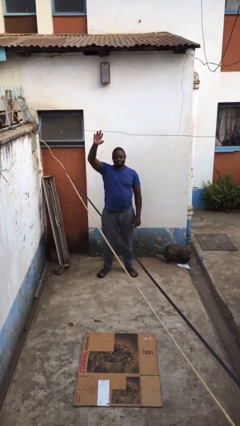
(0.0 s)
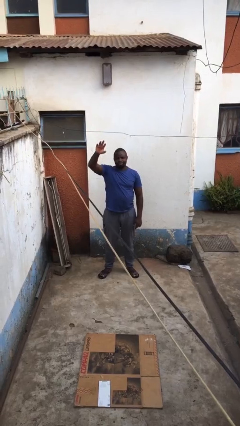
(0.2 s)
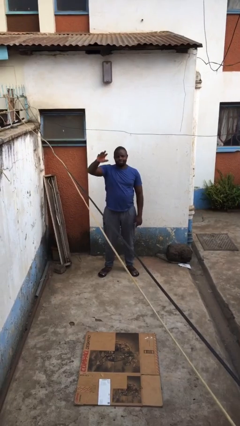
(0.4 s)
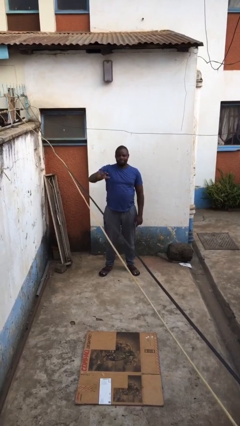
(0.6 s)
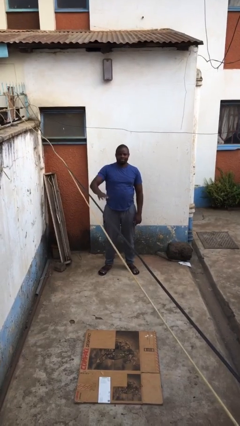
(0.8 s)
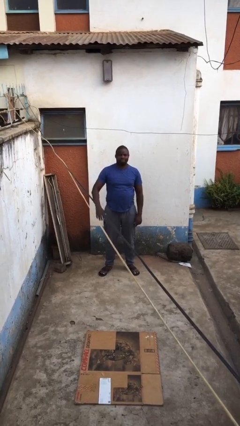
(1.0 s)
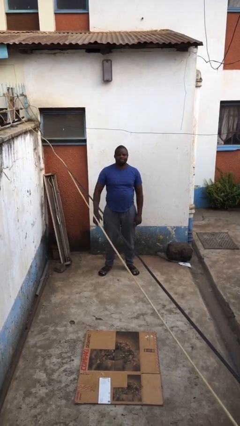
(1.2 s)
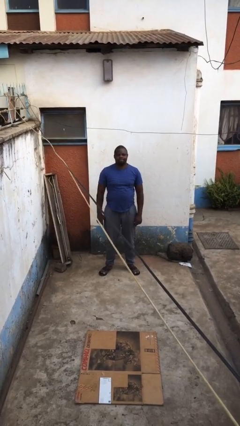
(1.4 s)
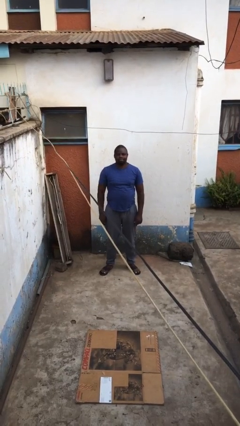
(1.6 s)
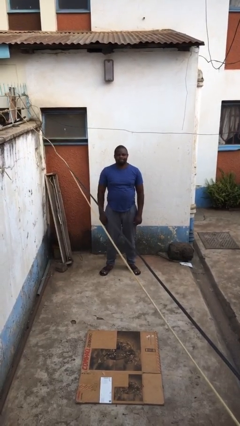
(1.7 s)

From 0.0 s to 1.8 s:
person gestures lower hand

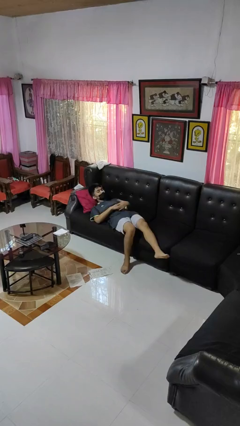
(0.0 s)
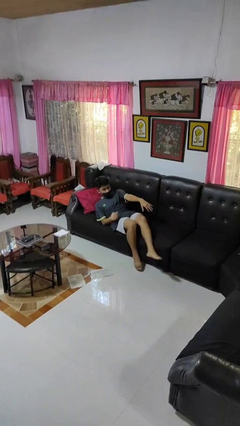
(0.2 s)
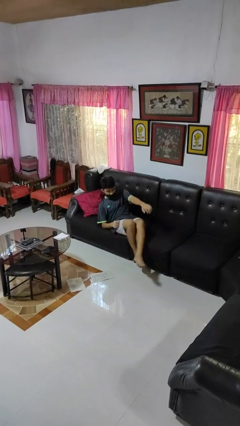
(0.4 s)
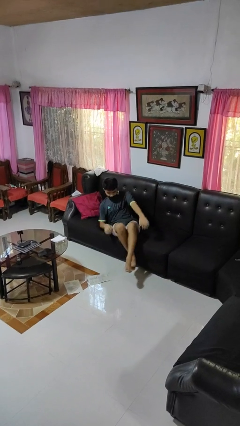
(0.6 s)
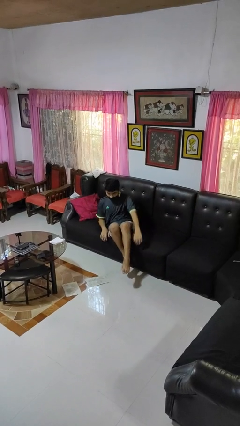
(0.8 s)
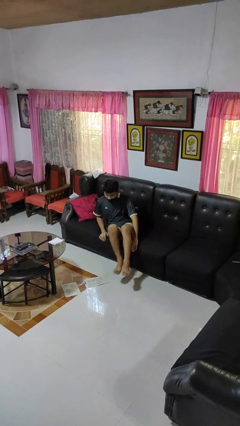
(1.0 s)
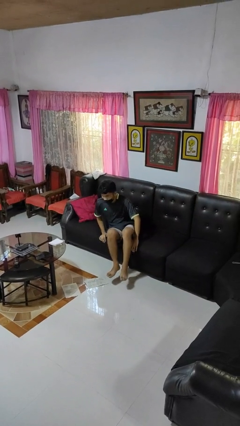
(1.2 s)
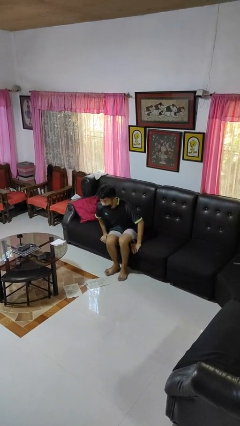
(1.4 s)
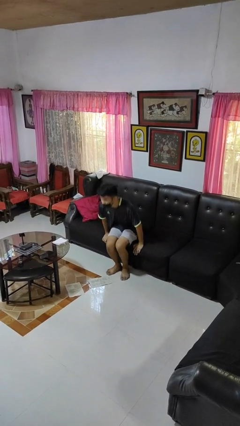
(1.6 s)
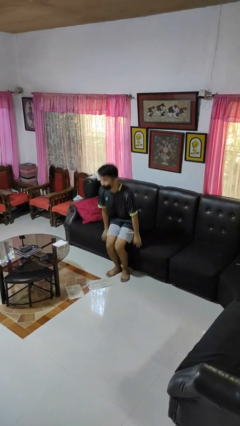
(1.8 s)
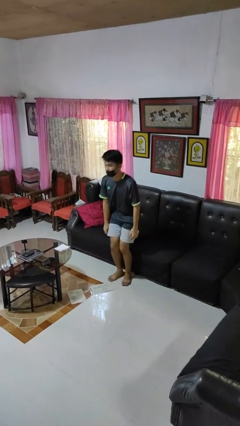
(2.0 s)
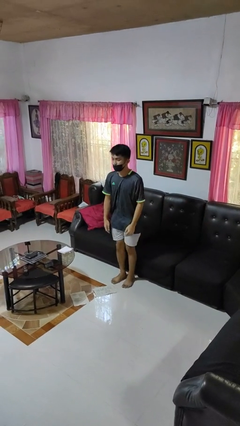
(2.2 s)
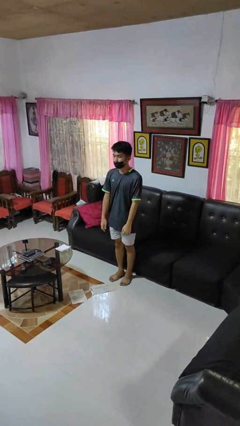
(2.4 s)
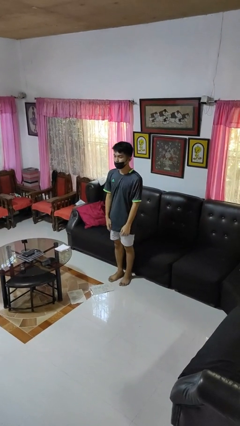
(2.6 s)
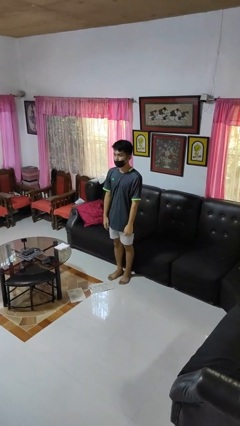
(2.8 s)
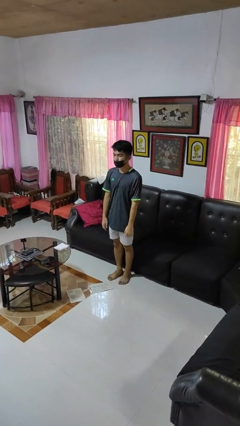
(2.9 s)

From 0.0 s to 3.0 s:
person stands up

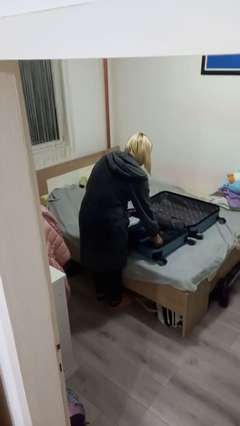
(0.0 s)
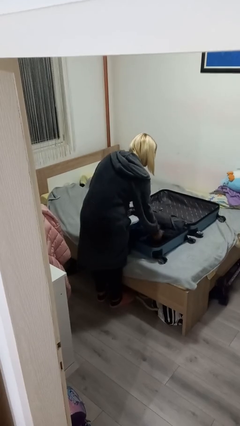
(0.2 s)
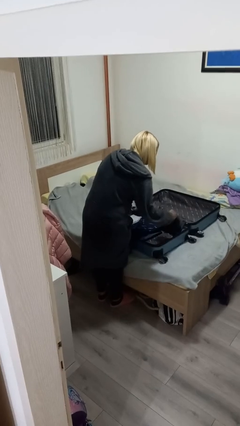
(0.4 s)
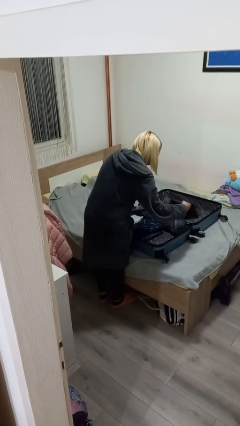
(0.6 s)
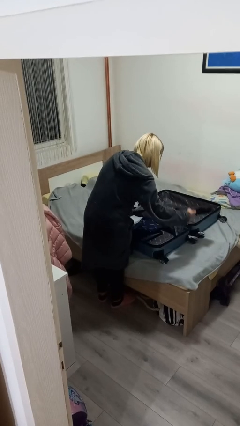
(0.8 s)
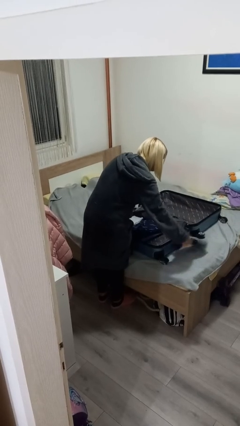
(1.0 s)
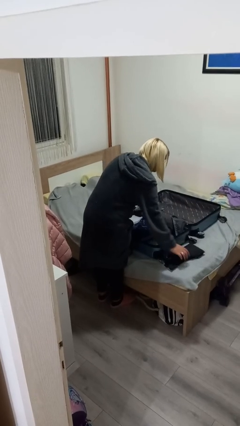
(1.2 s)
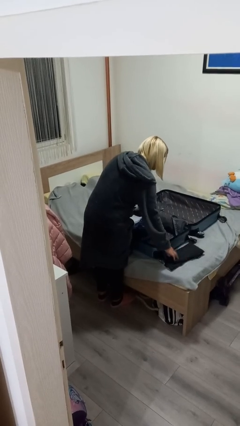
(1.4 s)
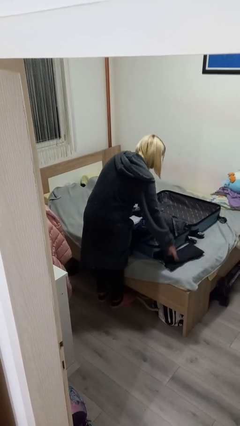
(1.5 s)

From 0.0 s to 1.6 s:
person unloads clothes from suitcase

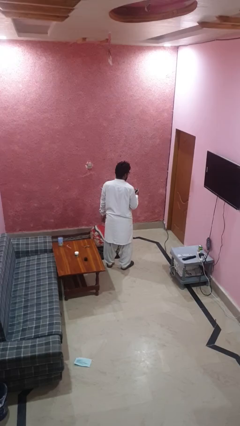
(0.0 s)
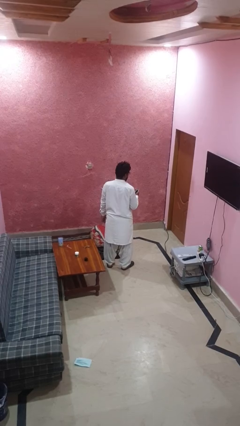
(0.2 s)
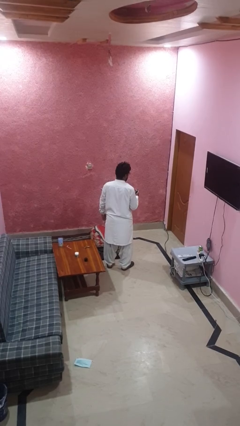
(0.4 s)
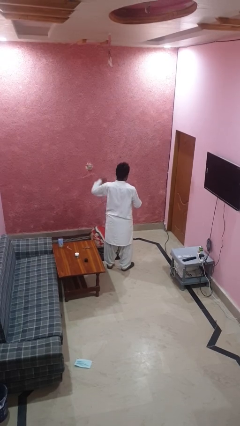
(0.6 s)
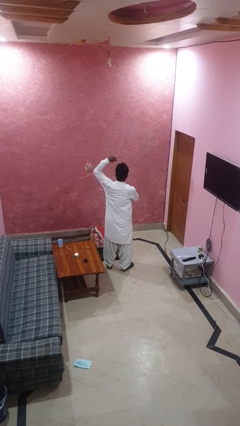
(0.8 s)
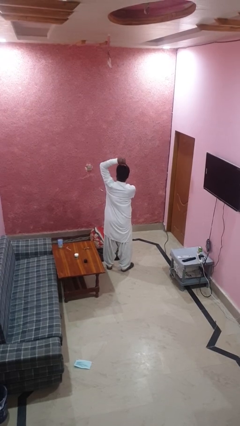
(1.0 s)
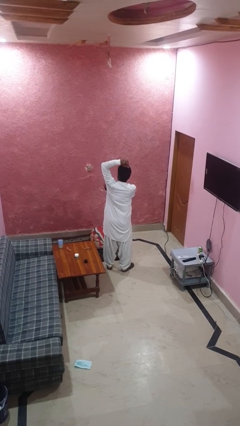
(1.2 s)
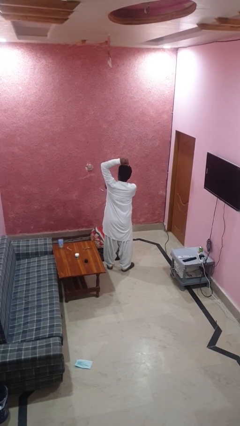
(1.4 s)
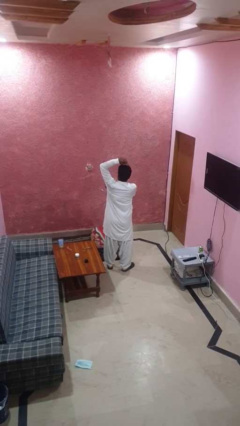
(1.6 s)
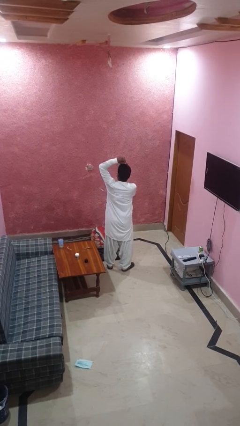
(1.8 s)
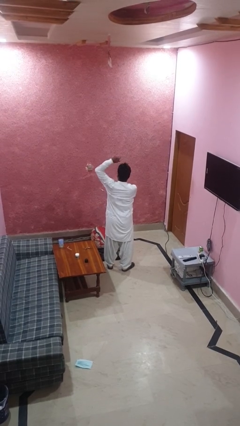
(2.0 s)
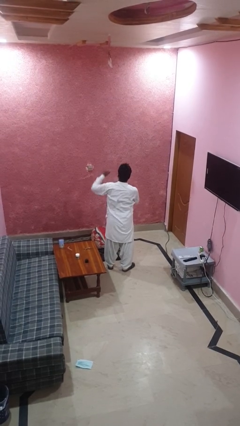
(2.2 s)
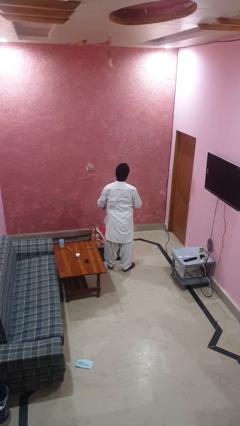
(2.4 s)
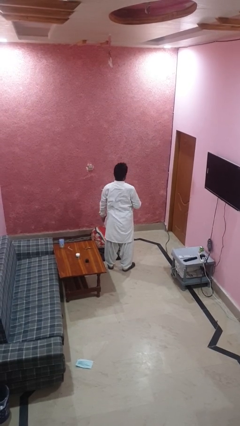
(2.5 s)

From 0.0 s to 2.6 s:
person applies deodorant

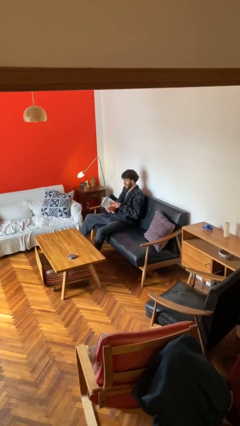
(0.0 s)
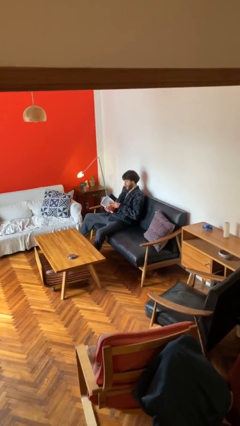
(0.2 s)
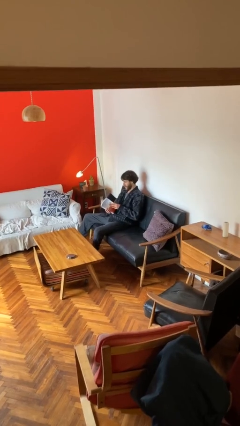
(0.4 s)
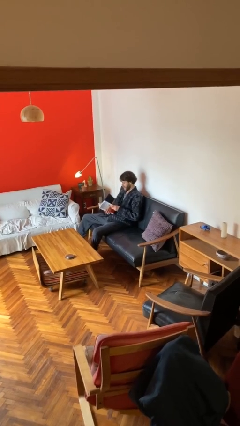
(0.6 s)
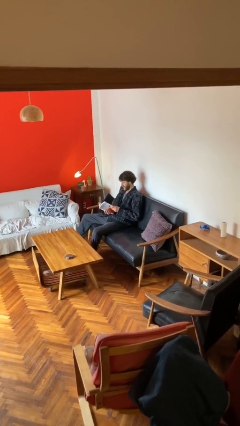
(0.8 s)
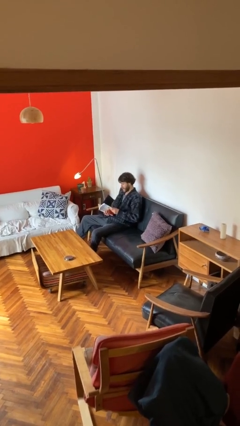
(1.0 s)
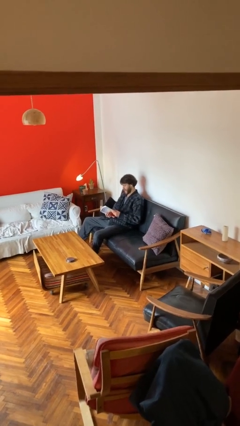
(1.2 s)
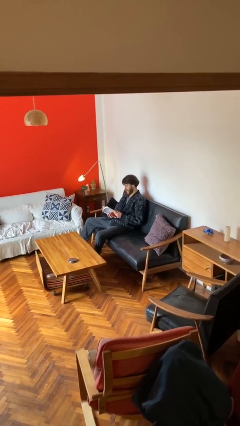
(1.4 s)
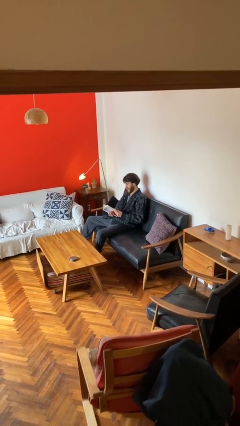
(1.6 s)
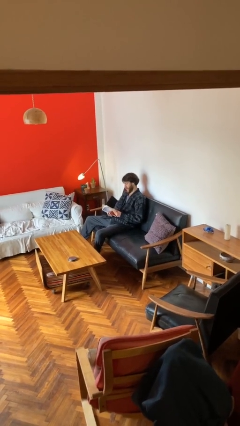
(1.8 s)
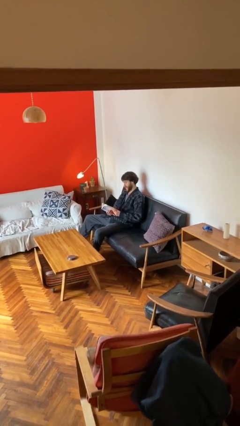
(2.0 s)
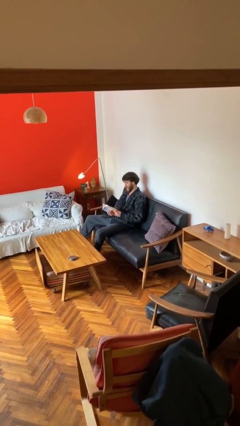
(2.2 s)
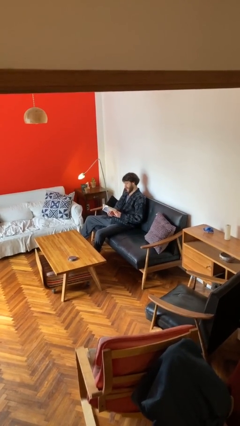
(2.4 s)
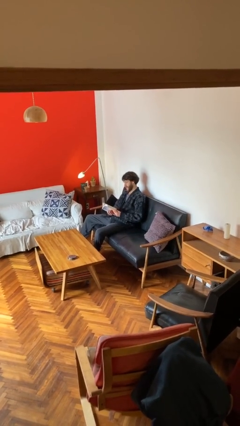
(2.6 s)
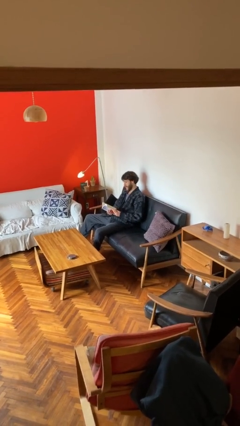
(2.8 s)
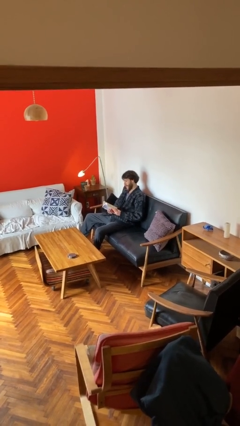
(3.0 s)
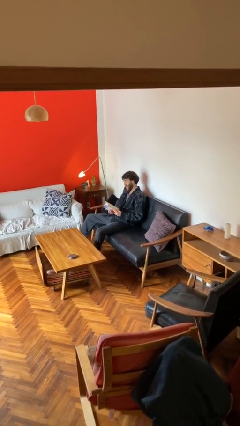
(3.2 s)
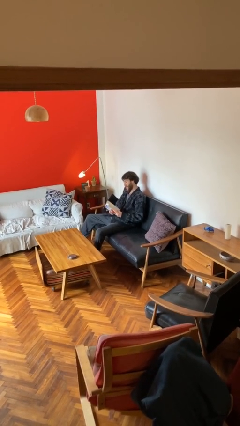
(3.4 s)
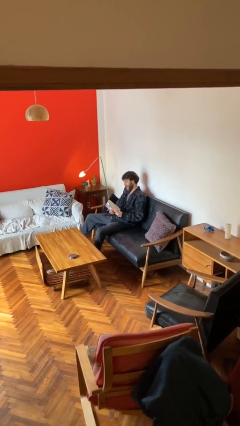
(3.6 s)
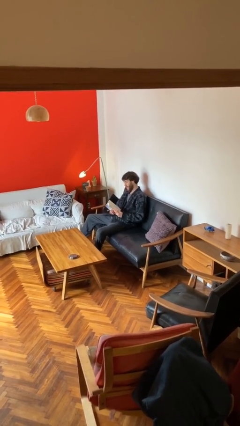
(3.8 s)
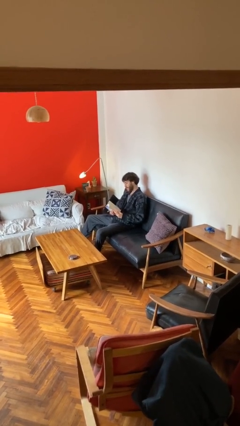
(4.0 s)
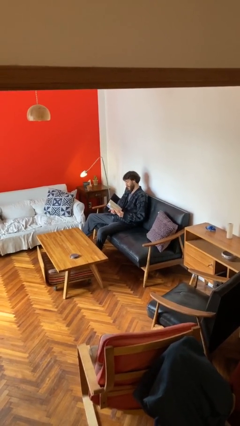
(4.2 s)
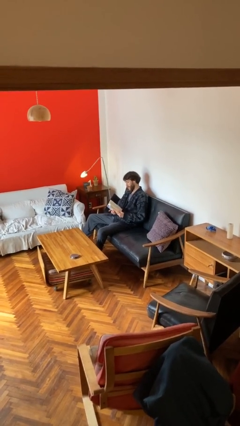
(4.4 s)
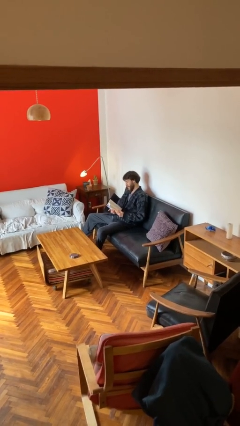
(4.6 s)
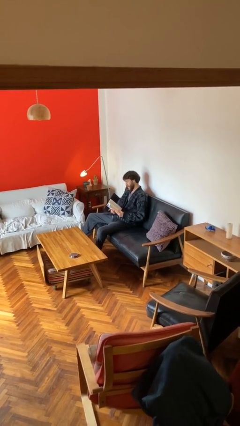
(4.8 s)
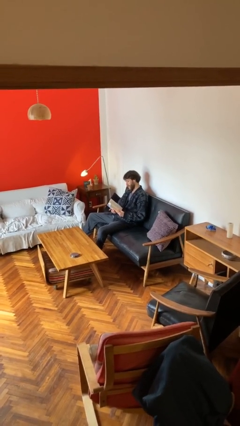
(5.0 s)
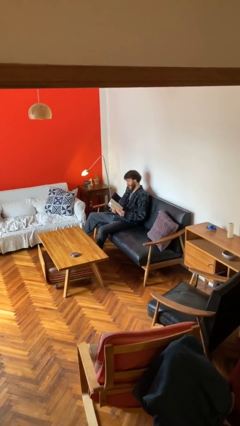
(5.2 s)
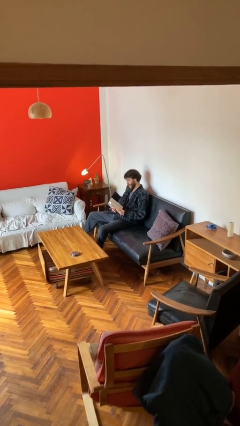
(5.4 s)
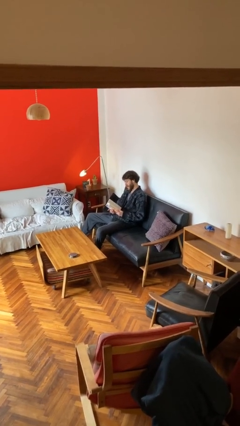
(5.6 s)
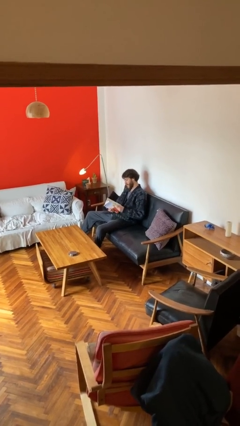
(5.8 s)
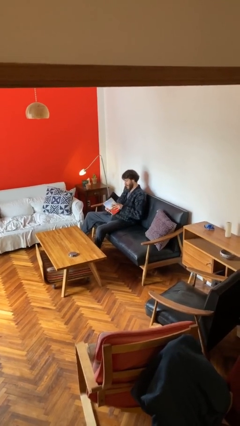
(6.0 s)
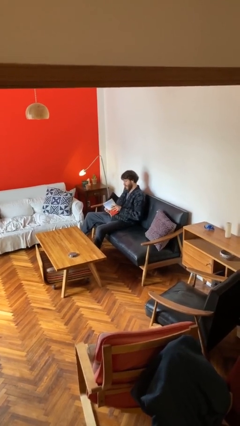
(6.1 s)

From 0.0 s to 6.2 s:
person reads document

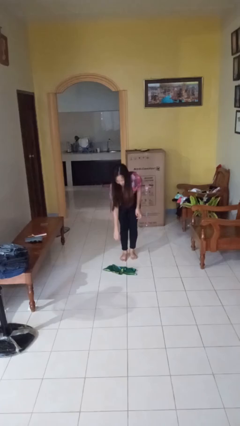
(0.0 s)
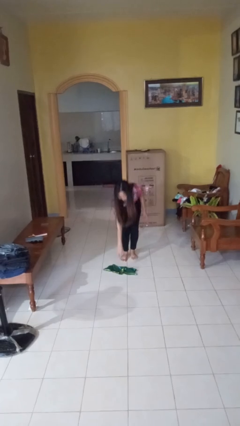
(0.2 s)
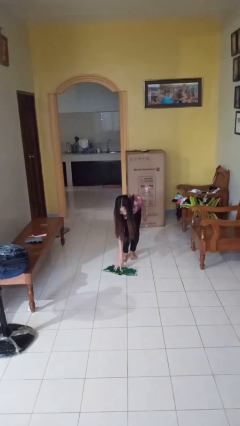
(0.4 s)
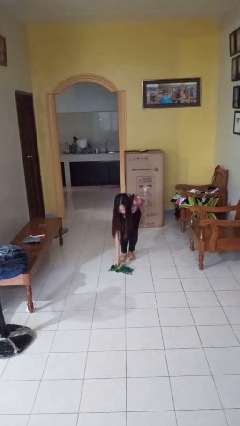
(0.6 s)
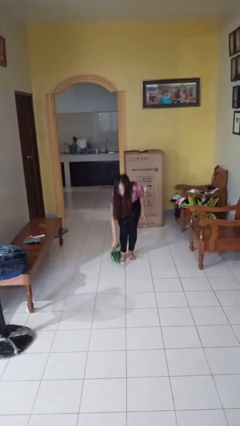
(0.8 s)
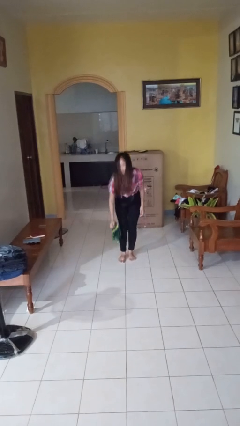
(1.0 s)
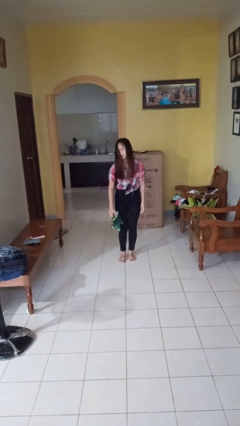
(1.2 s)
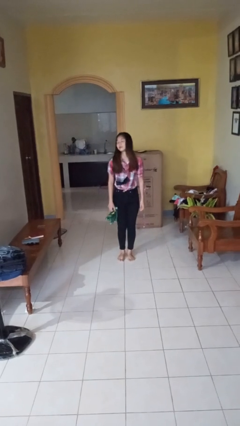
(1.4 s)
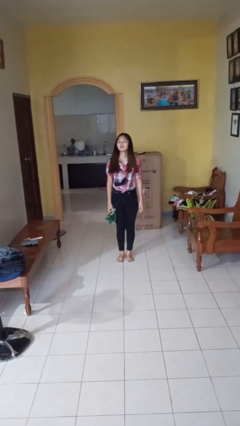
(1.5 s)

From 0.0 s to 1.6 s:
person picks up object from floor

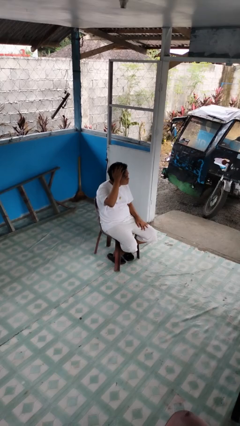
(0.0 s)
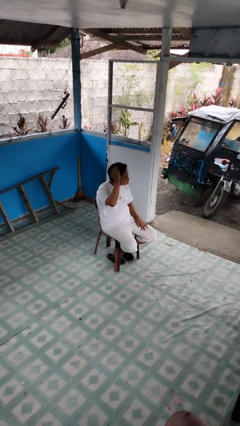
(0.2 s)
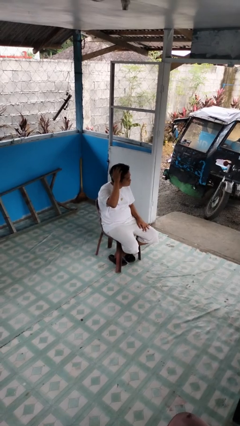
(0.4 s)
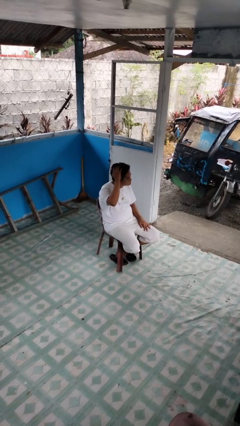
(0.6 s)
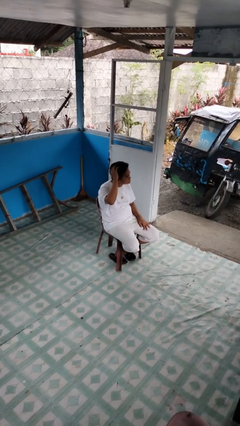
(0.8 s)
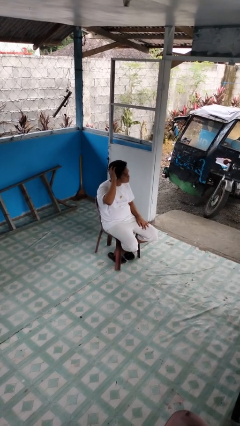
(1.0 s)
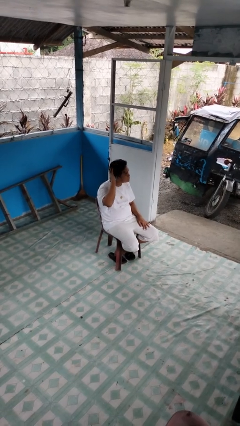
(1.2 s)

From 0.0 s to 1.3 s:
person pats head
